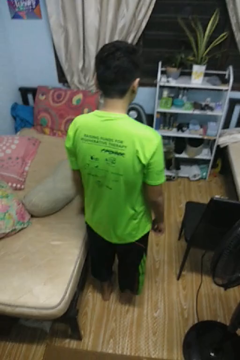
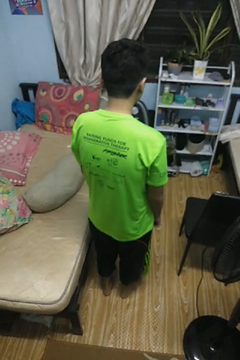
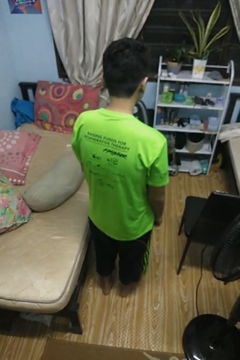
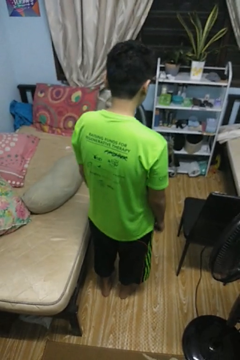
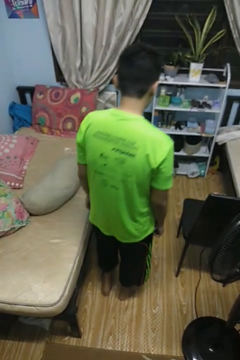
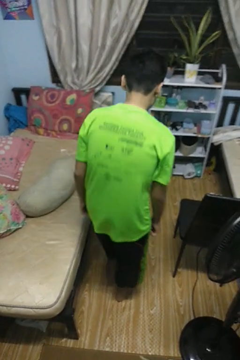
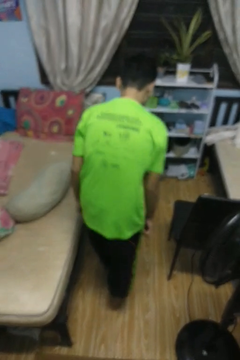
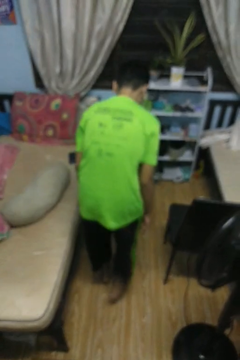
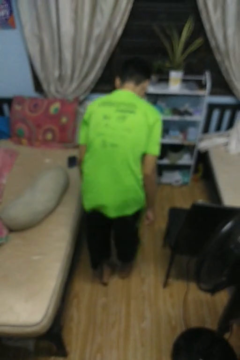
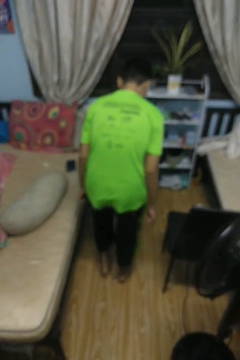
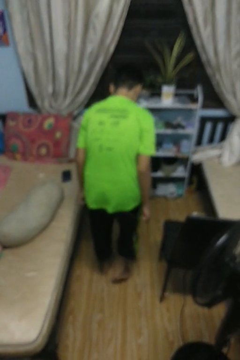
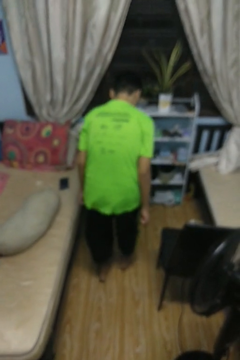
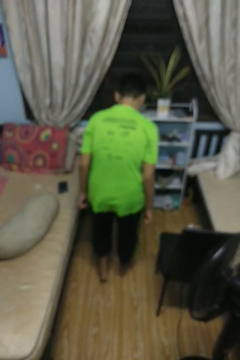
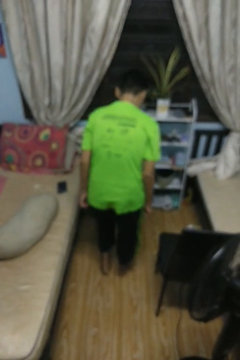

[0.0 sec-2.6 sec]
person walks tiptoe

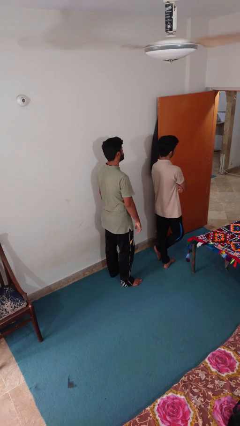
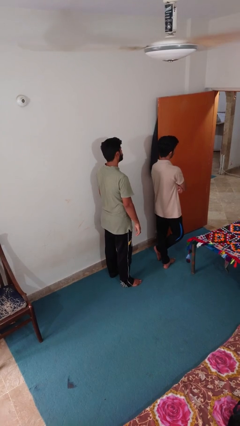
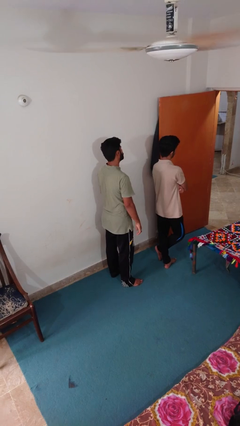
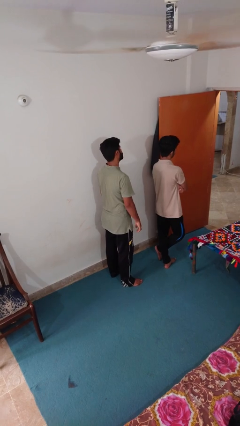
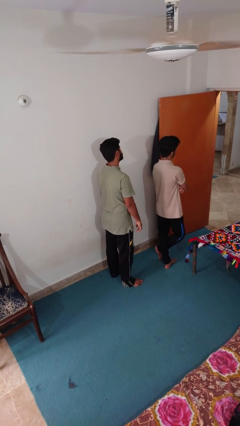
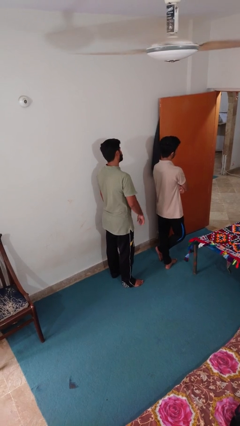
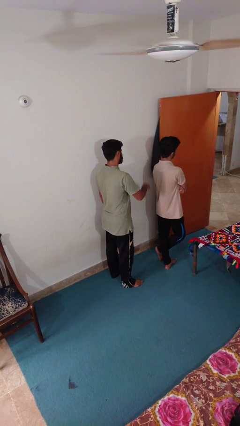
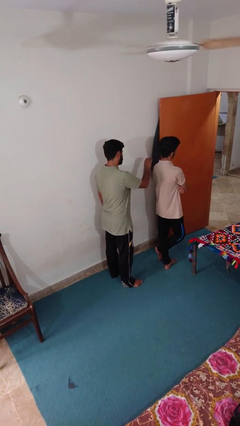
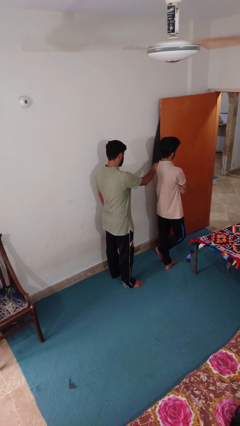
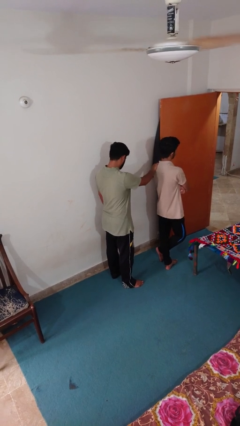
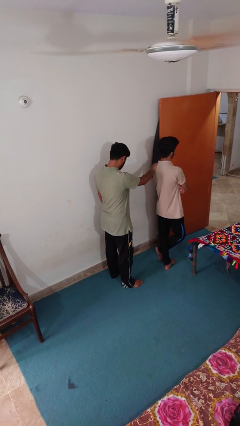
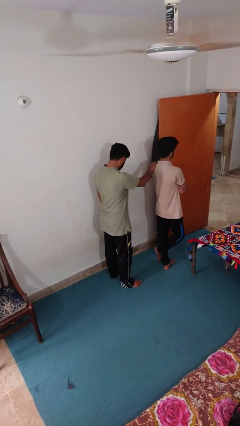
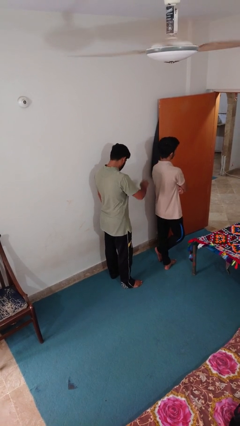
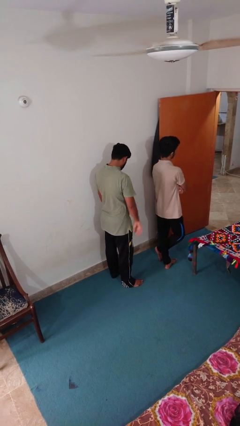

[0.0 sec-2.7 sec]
person touches back of person

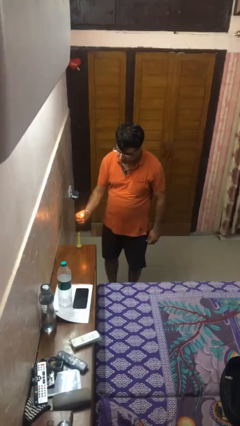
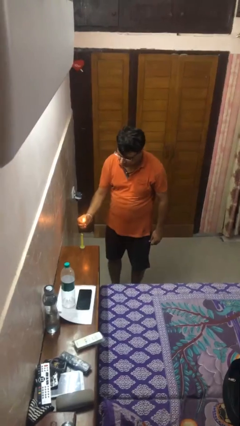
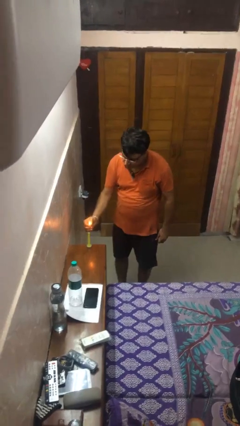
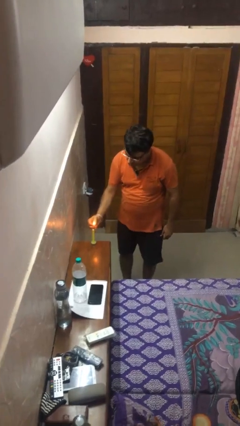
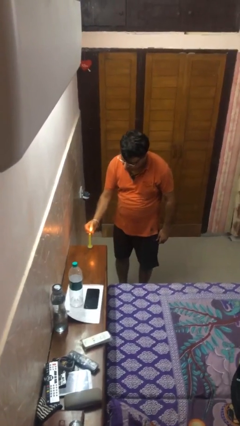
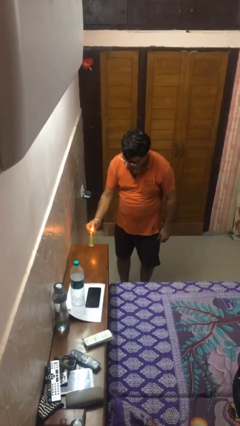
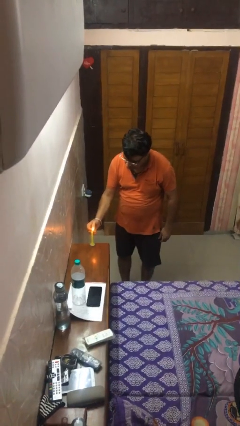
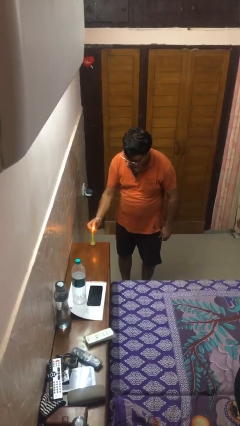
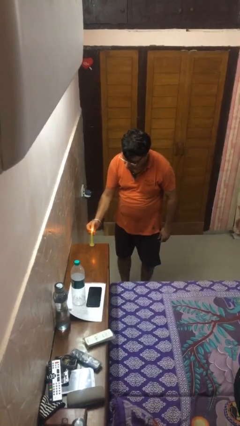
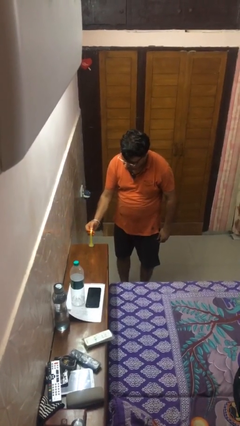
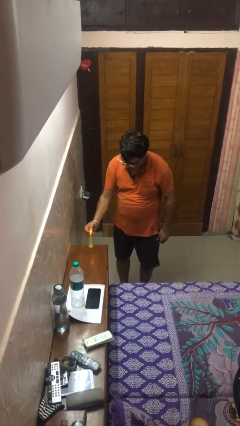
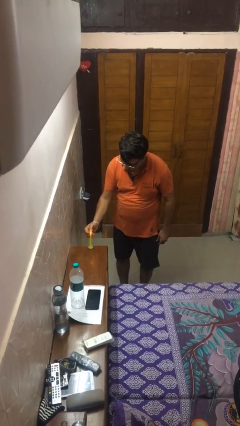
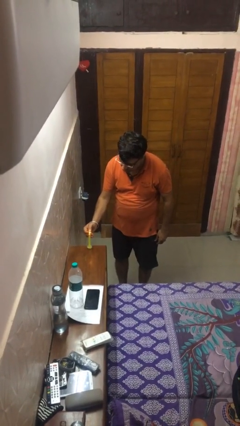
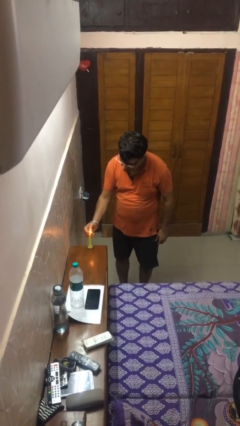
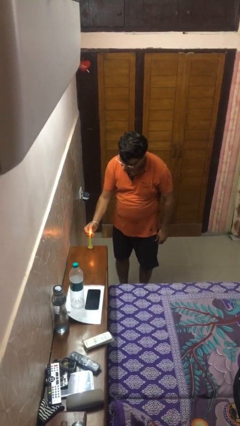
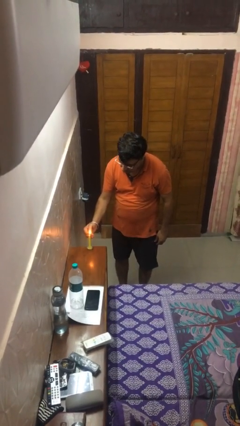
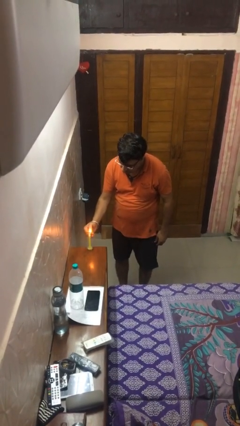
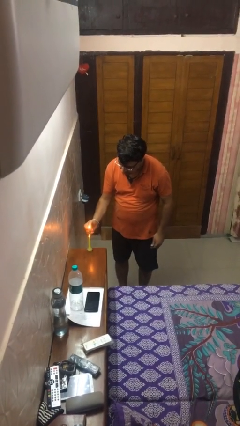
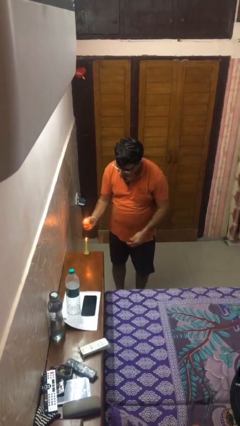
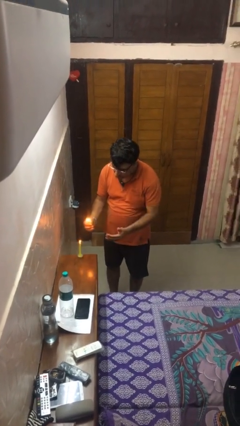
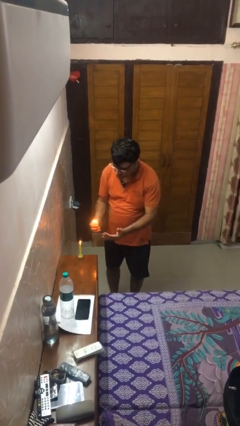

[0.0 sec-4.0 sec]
person lights candle

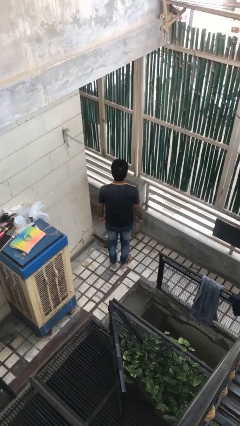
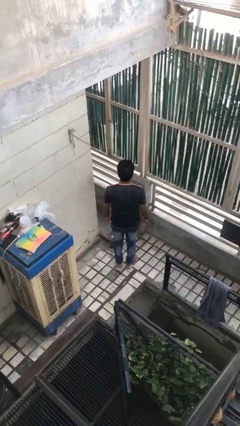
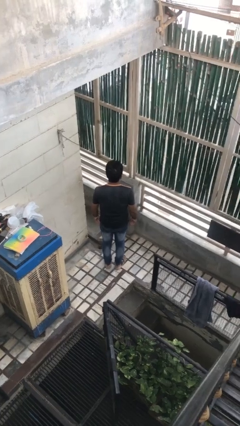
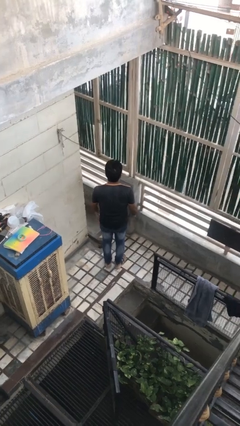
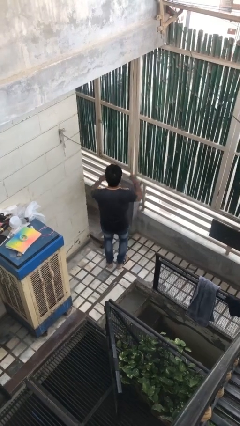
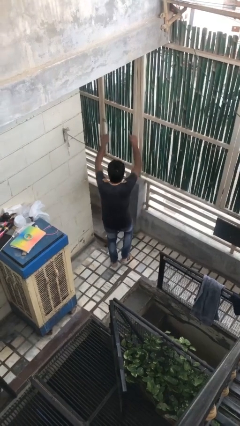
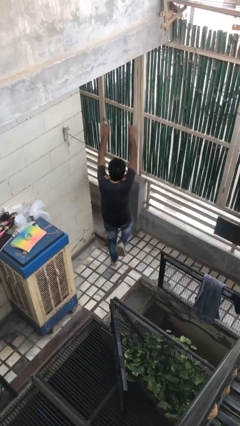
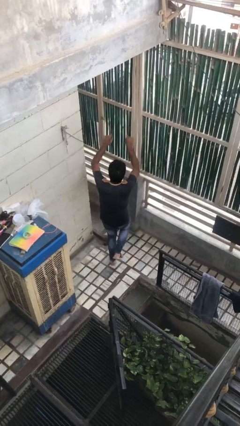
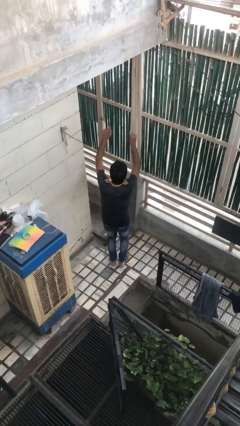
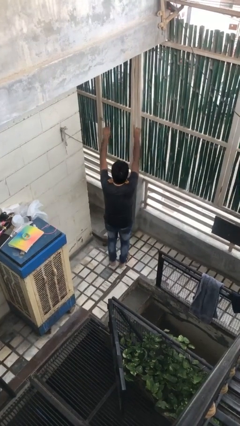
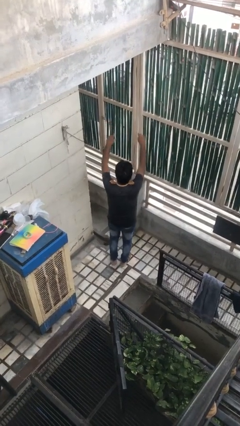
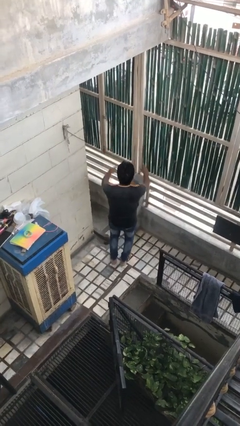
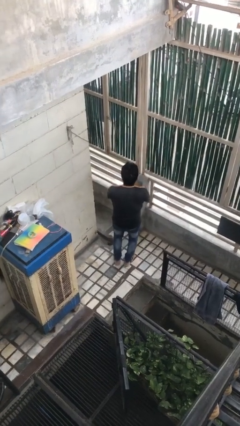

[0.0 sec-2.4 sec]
person dances in place

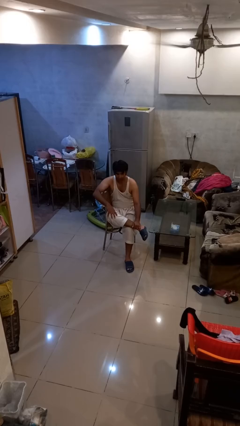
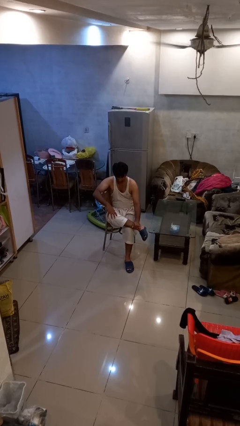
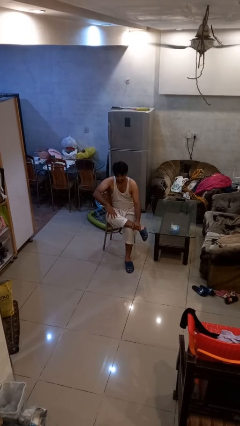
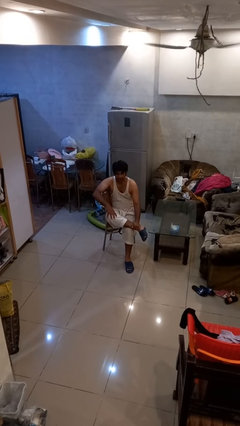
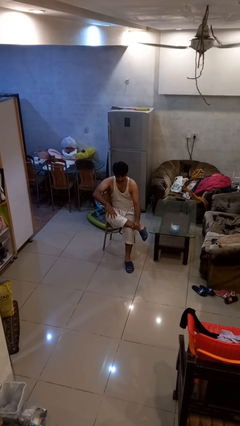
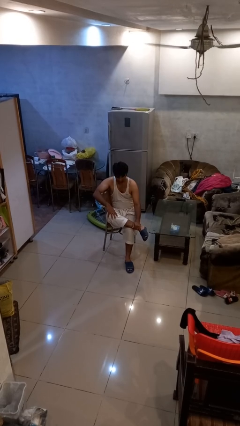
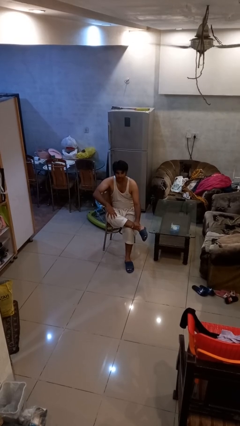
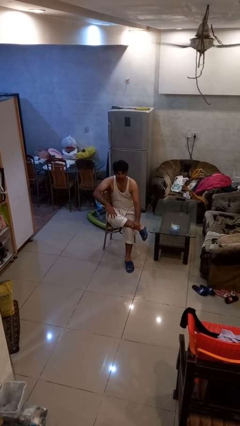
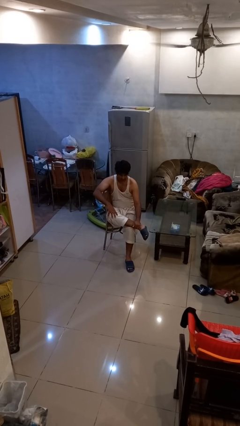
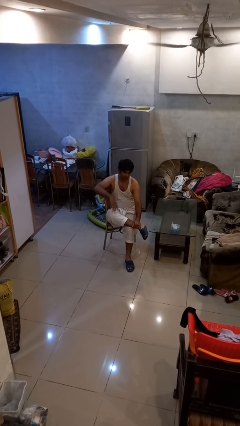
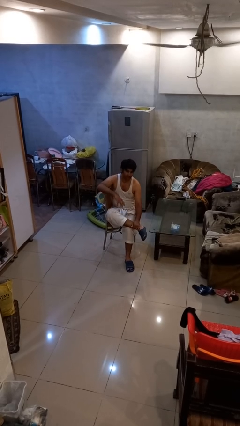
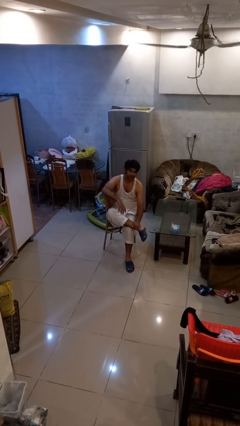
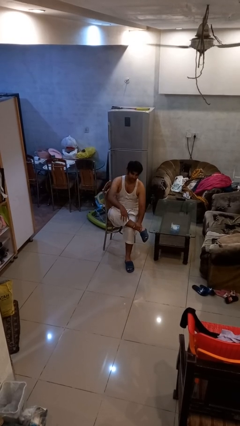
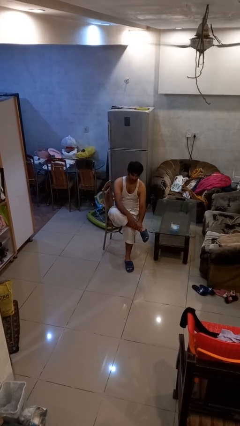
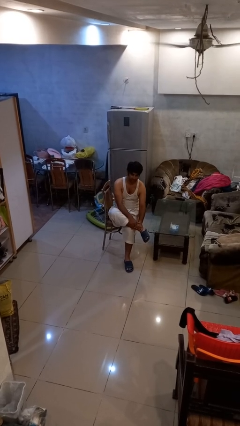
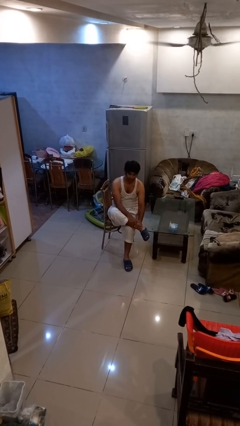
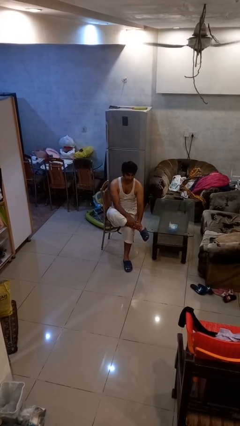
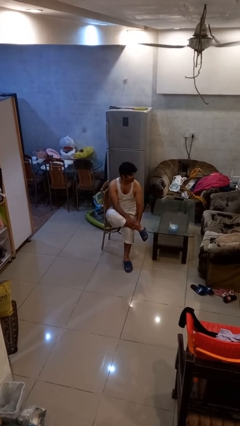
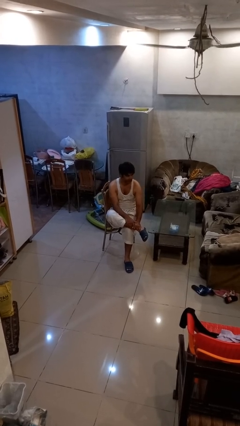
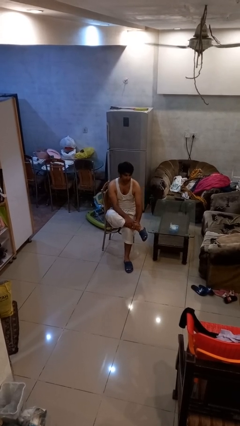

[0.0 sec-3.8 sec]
person nods head

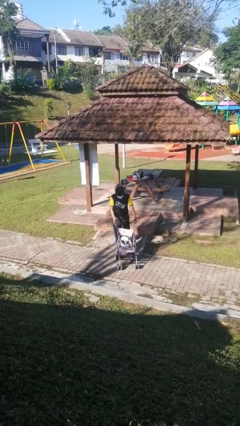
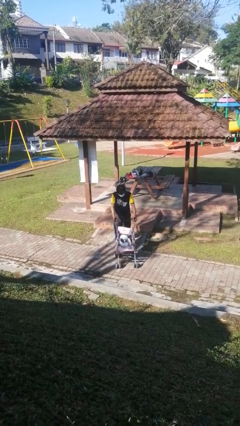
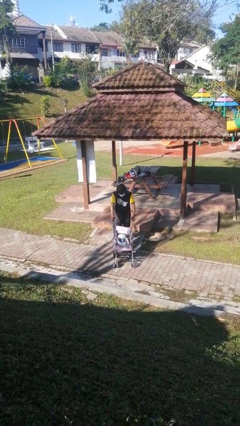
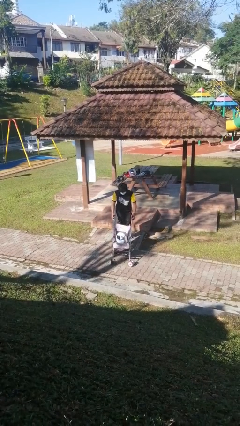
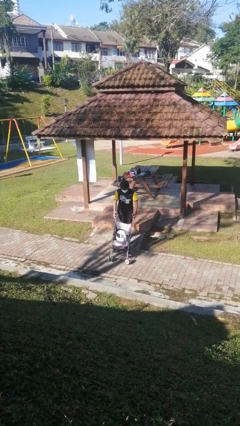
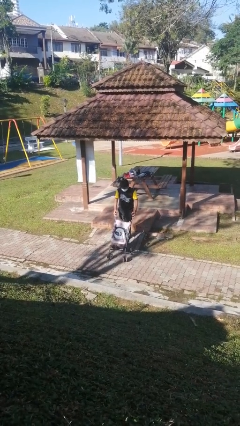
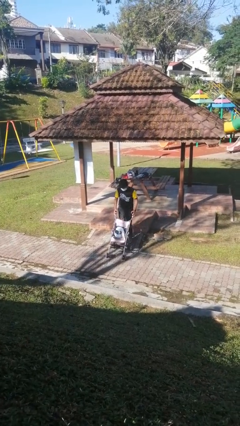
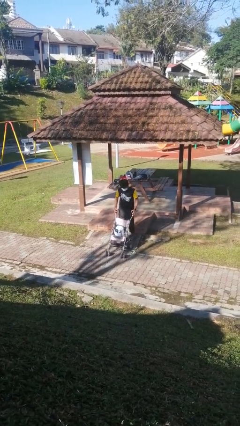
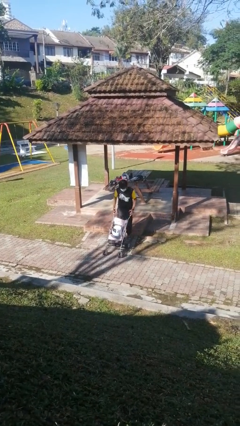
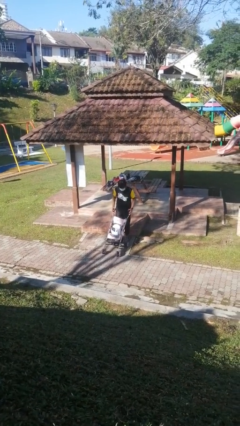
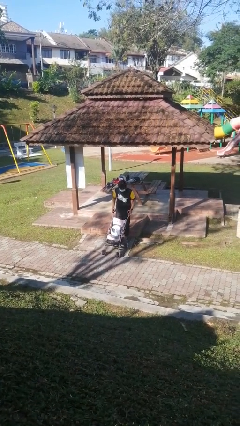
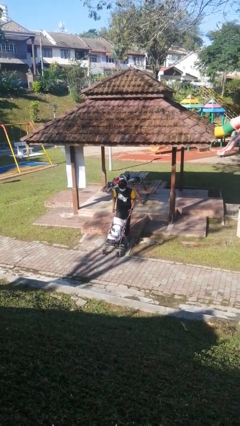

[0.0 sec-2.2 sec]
person pulls wheeled cart
